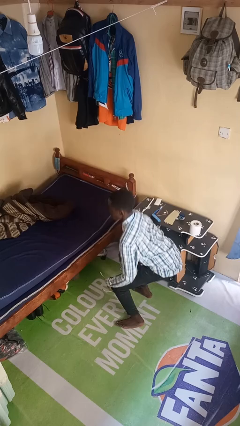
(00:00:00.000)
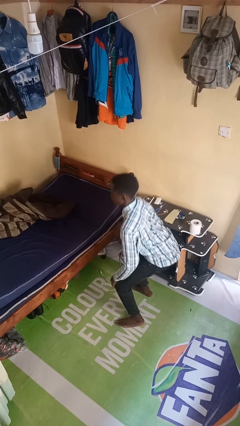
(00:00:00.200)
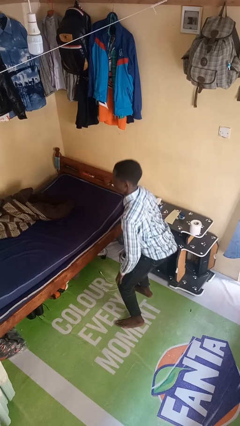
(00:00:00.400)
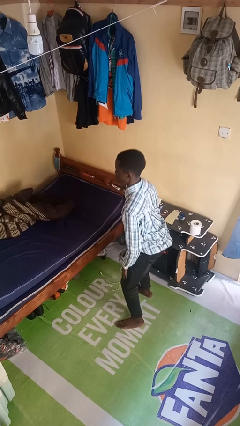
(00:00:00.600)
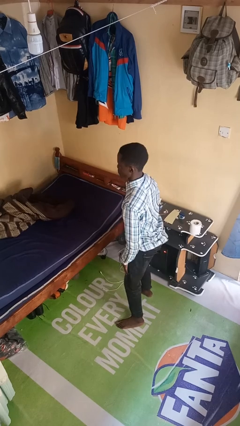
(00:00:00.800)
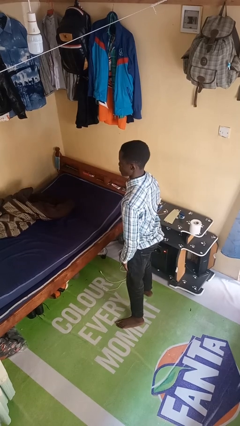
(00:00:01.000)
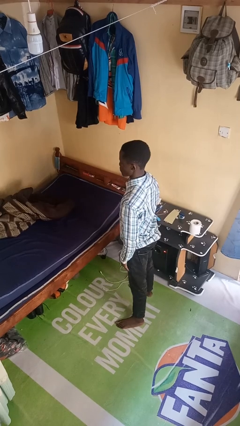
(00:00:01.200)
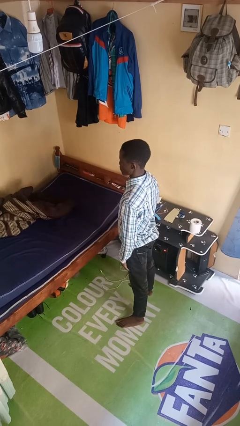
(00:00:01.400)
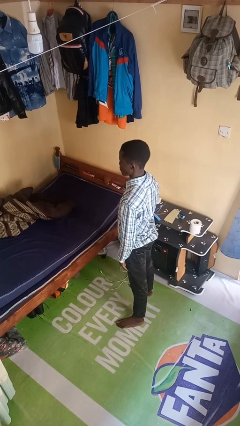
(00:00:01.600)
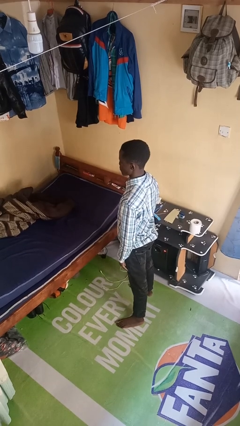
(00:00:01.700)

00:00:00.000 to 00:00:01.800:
person stands up

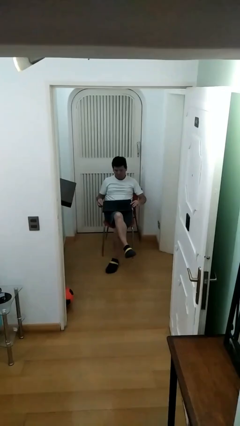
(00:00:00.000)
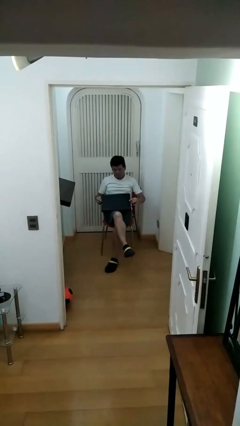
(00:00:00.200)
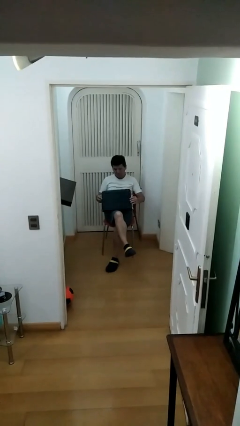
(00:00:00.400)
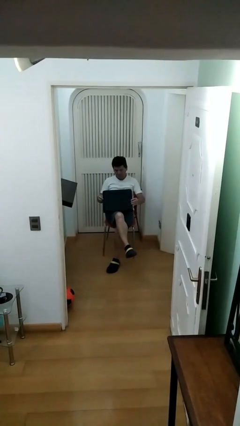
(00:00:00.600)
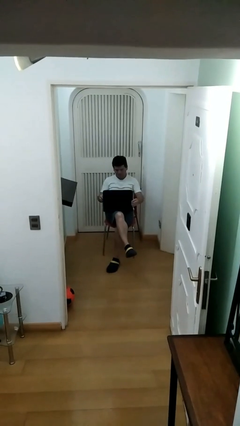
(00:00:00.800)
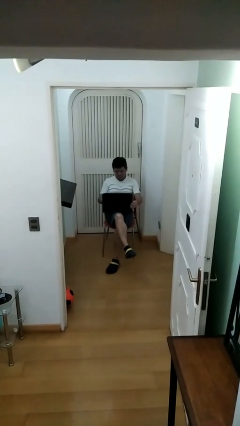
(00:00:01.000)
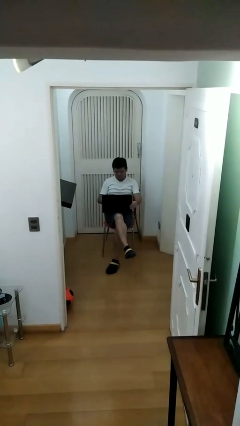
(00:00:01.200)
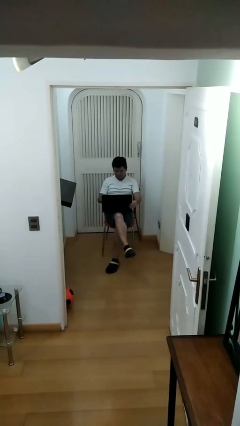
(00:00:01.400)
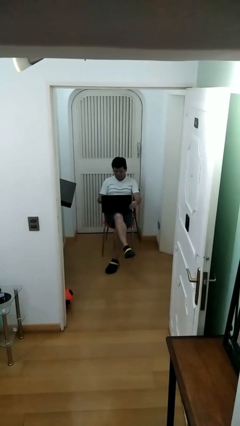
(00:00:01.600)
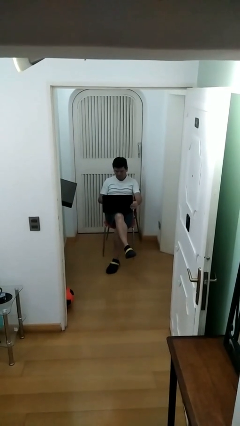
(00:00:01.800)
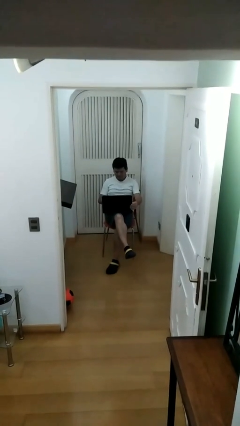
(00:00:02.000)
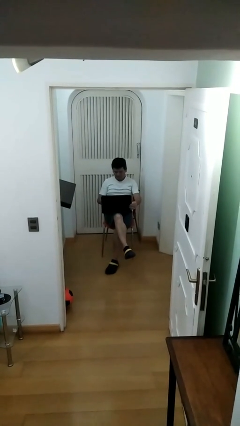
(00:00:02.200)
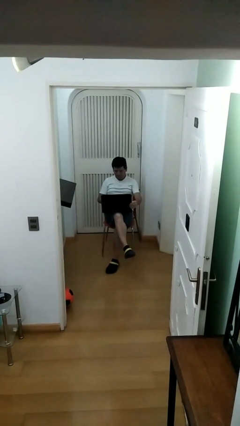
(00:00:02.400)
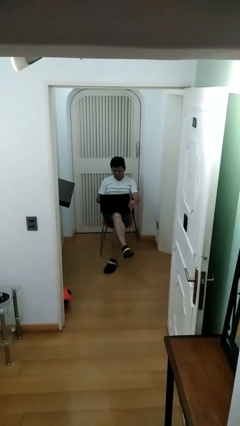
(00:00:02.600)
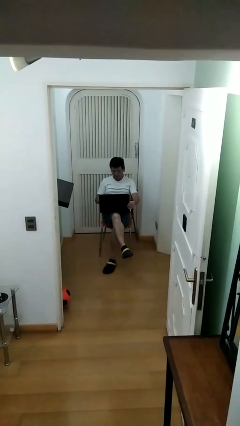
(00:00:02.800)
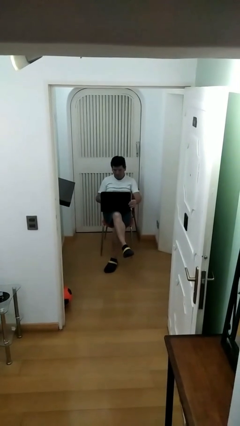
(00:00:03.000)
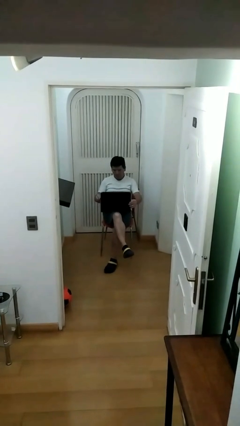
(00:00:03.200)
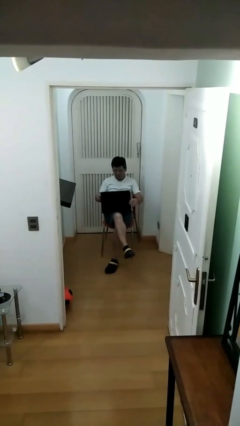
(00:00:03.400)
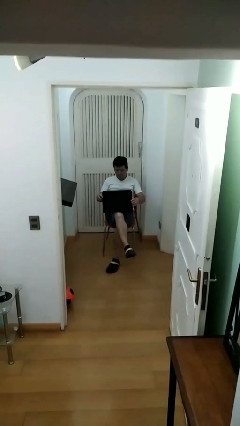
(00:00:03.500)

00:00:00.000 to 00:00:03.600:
person interacts with laptop

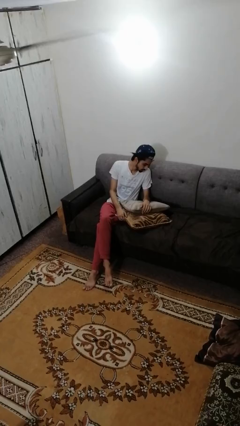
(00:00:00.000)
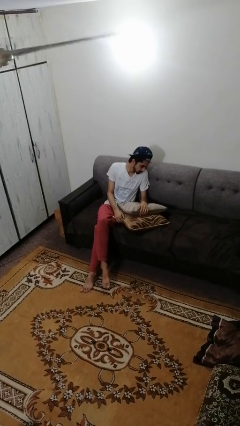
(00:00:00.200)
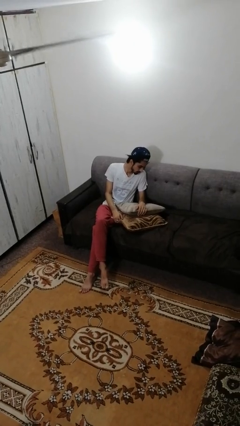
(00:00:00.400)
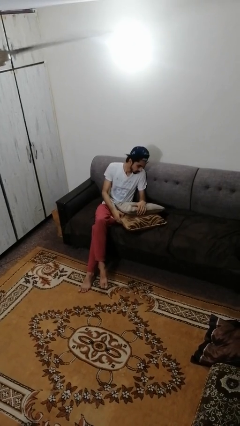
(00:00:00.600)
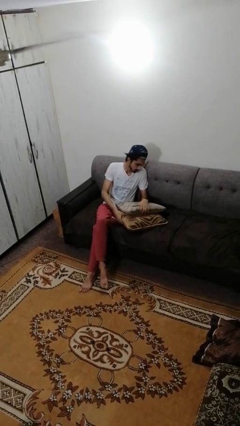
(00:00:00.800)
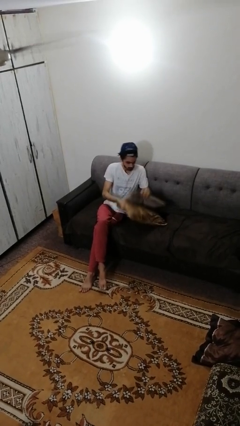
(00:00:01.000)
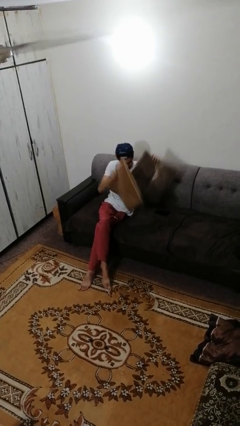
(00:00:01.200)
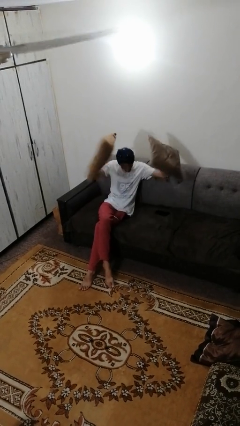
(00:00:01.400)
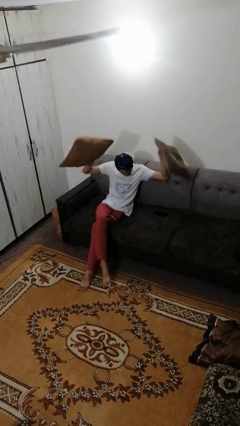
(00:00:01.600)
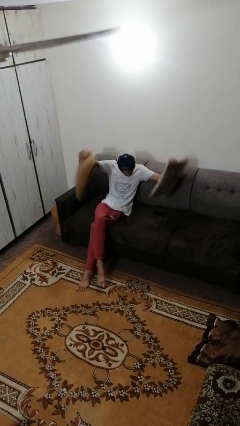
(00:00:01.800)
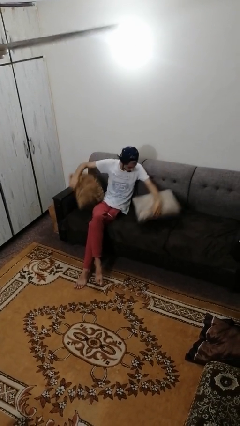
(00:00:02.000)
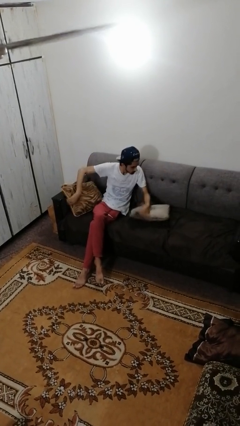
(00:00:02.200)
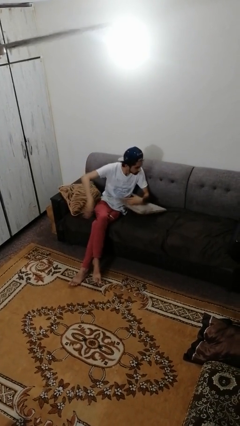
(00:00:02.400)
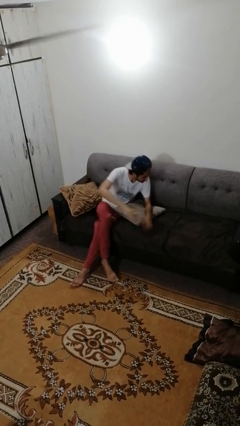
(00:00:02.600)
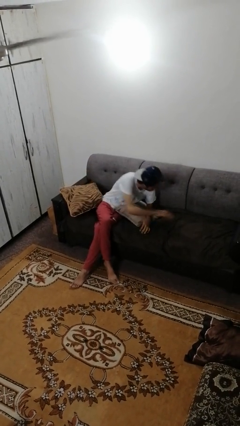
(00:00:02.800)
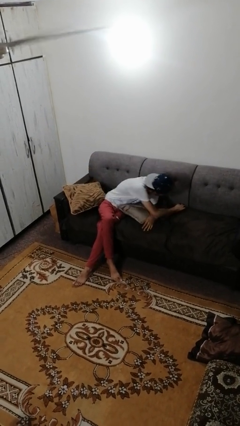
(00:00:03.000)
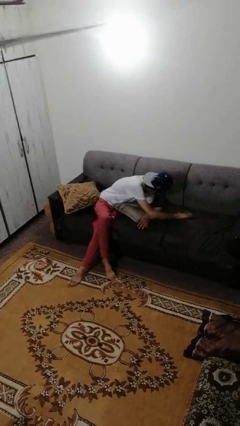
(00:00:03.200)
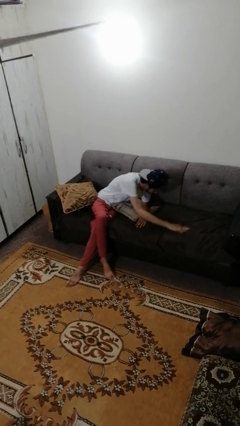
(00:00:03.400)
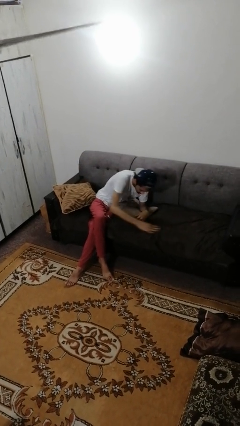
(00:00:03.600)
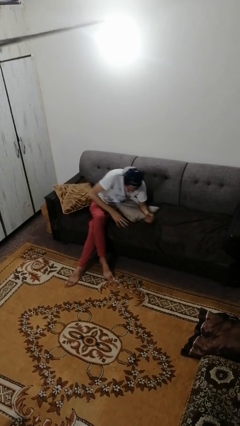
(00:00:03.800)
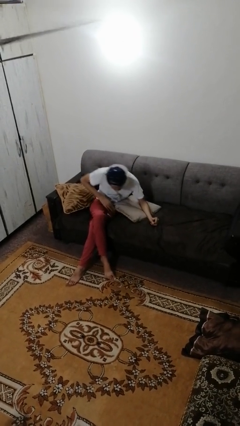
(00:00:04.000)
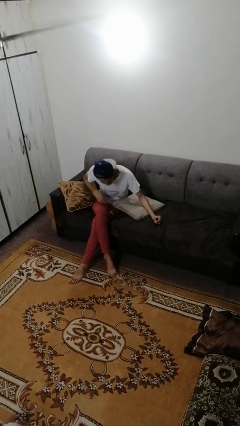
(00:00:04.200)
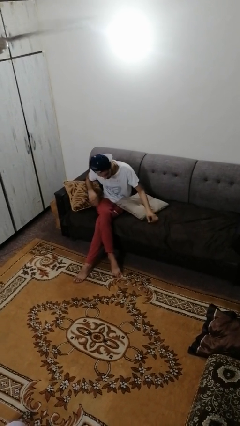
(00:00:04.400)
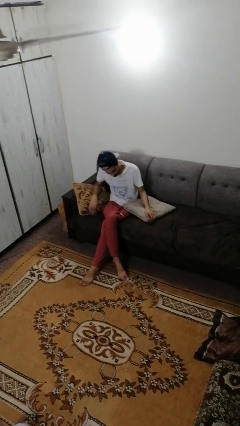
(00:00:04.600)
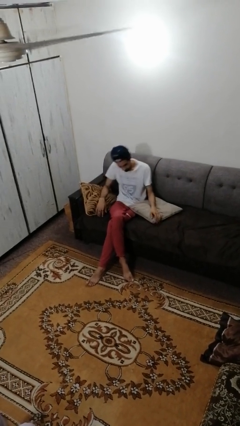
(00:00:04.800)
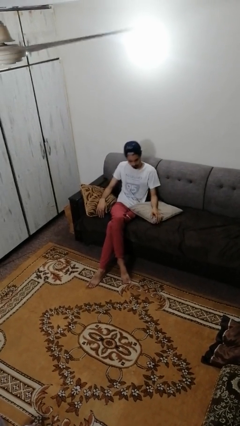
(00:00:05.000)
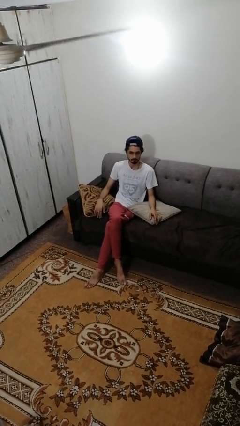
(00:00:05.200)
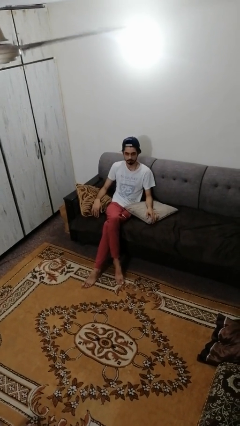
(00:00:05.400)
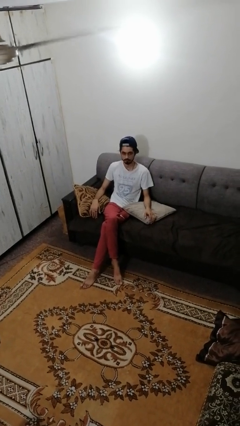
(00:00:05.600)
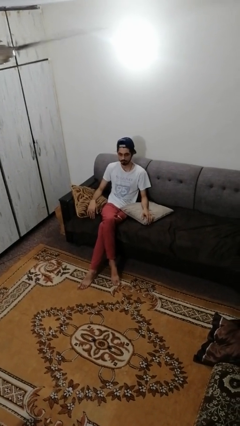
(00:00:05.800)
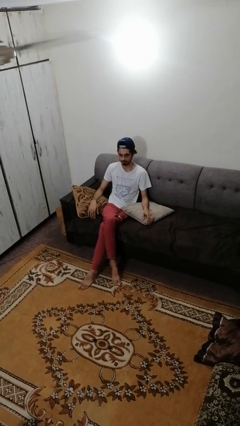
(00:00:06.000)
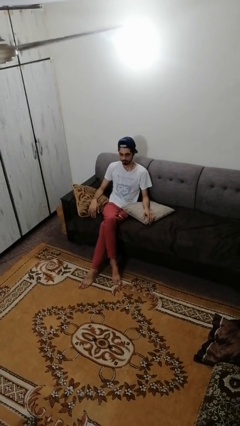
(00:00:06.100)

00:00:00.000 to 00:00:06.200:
person searches in couch

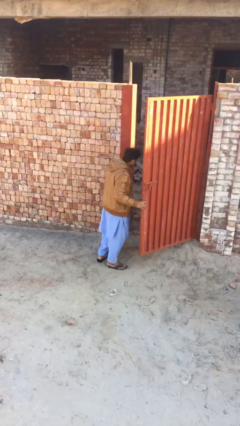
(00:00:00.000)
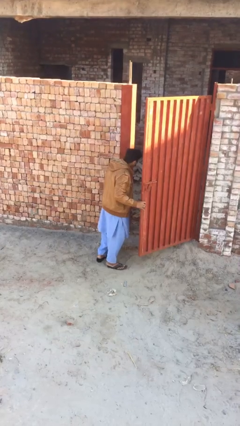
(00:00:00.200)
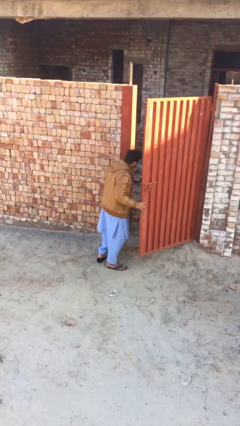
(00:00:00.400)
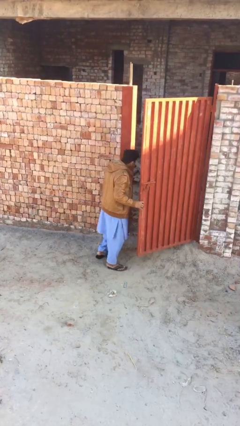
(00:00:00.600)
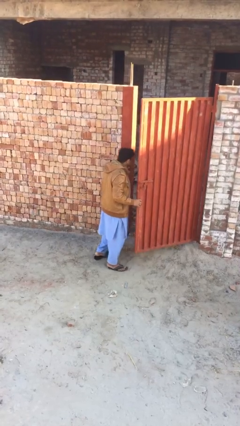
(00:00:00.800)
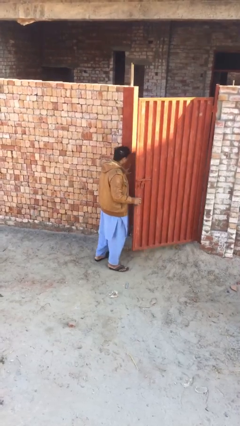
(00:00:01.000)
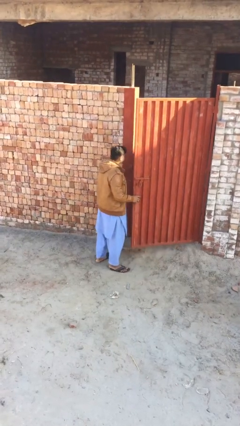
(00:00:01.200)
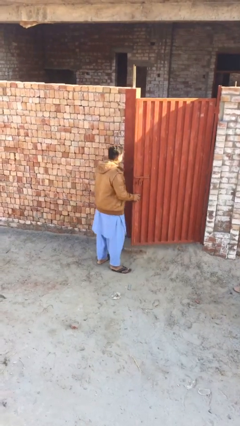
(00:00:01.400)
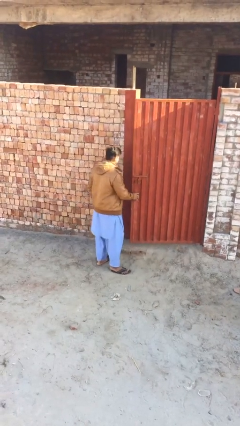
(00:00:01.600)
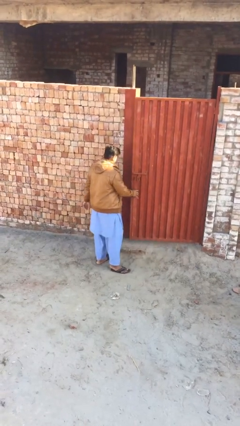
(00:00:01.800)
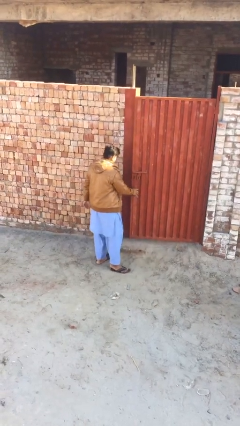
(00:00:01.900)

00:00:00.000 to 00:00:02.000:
person closes facility door

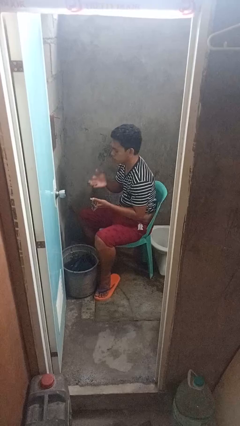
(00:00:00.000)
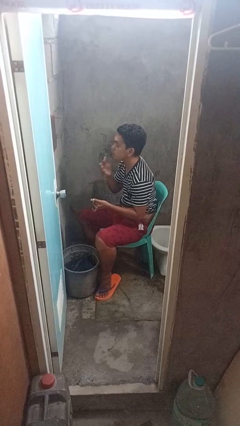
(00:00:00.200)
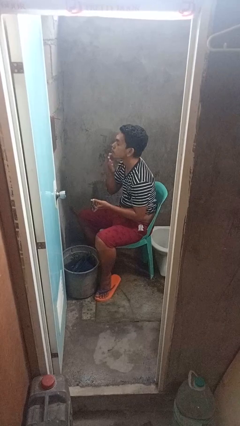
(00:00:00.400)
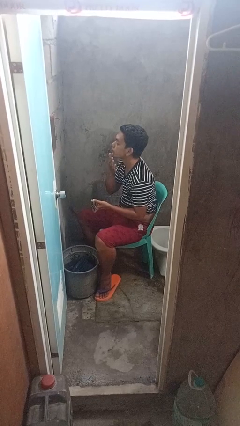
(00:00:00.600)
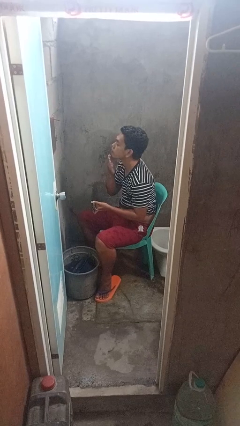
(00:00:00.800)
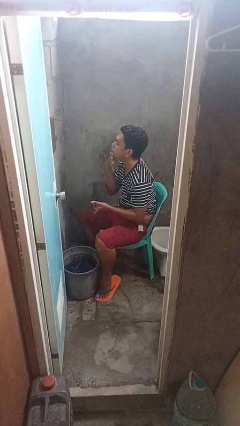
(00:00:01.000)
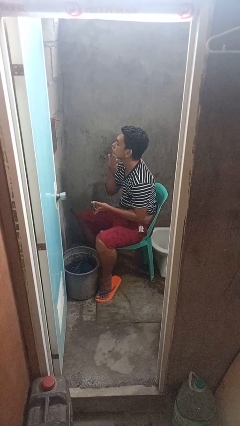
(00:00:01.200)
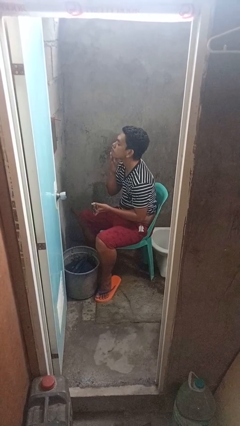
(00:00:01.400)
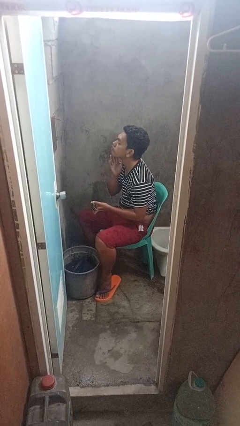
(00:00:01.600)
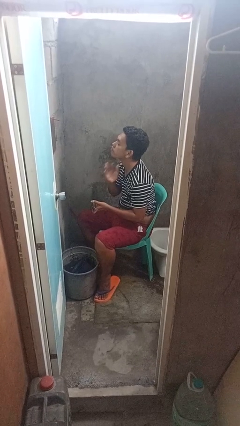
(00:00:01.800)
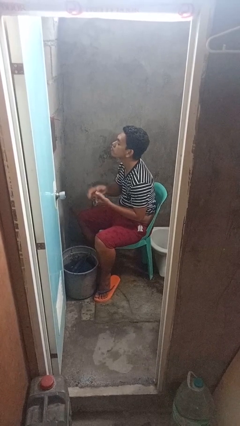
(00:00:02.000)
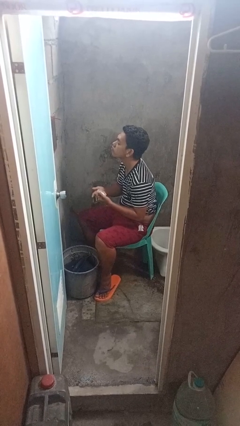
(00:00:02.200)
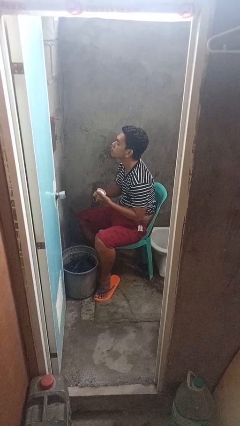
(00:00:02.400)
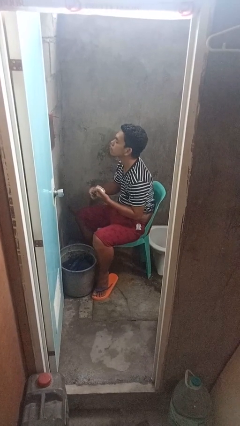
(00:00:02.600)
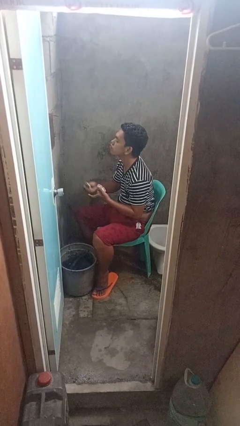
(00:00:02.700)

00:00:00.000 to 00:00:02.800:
person applies shaving cream

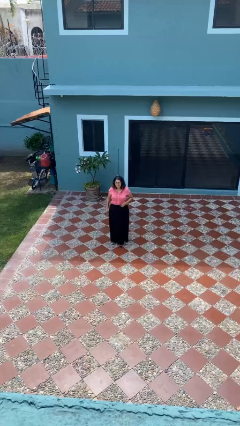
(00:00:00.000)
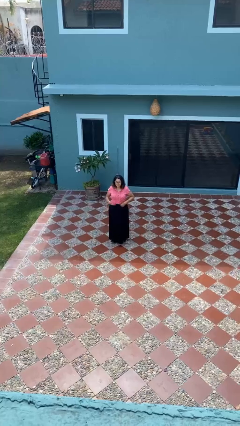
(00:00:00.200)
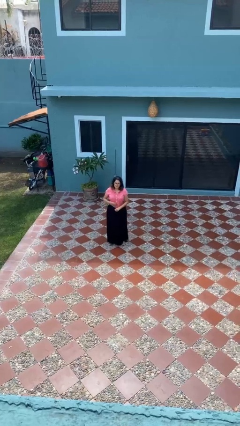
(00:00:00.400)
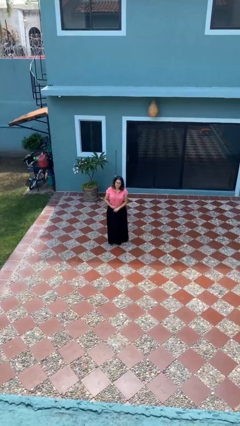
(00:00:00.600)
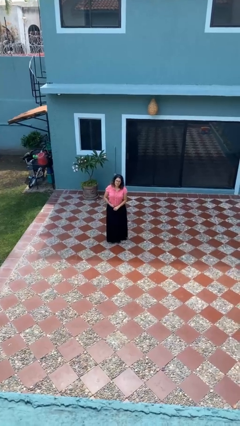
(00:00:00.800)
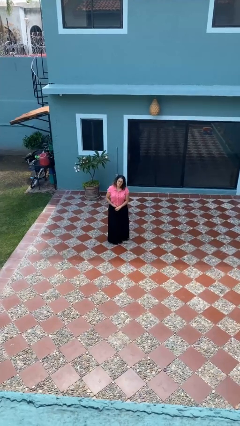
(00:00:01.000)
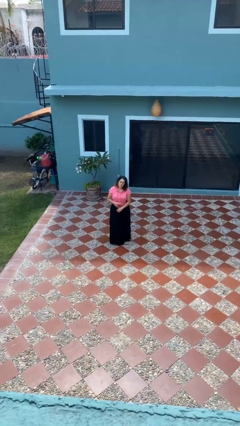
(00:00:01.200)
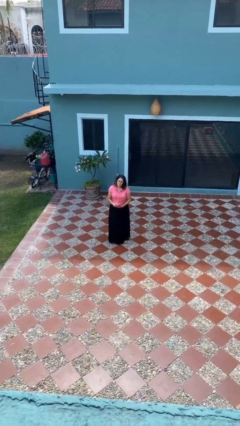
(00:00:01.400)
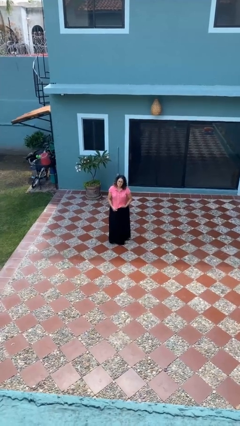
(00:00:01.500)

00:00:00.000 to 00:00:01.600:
person untucks shirt
